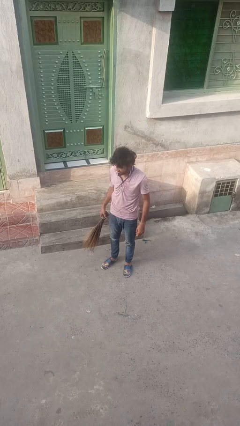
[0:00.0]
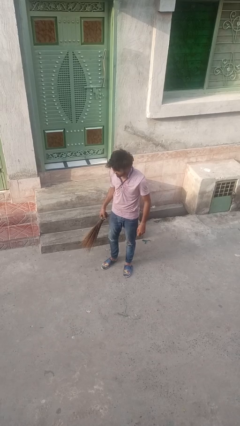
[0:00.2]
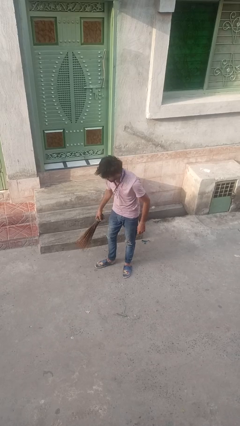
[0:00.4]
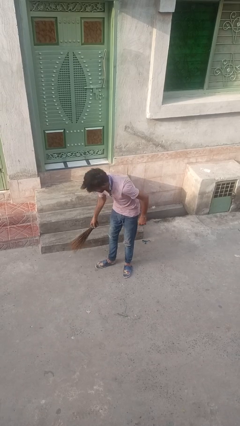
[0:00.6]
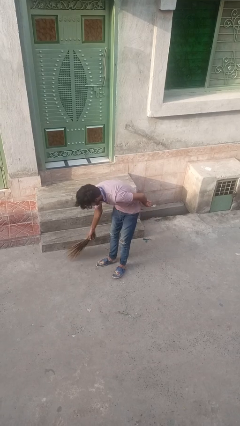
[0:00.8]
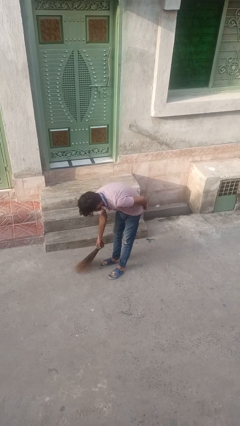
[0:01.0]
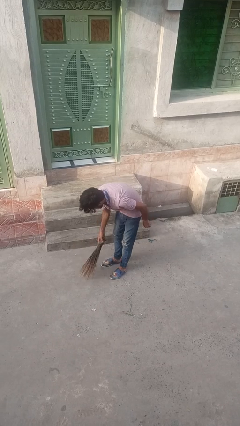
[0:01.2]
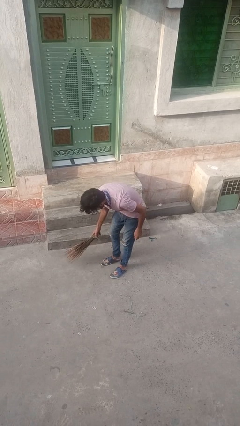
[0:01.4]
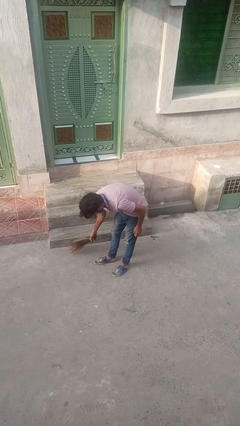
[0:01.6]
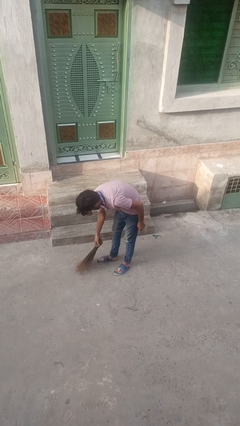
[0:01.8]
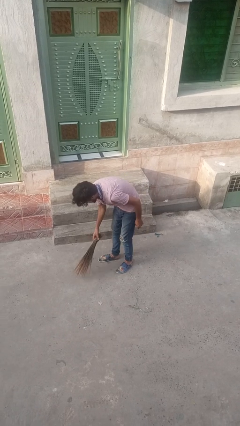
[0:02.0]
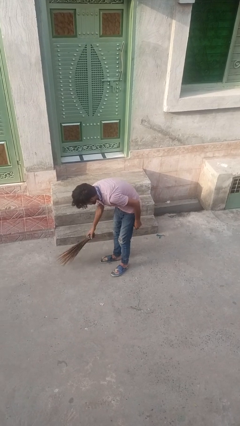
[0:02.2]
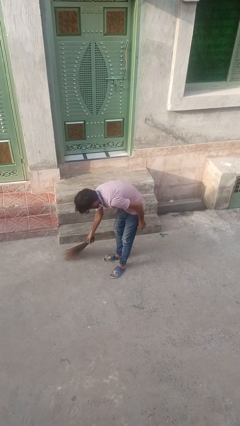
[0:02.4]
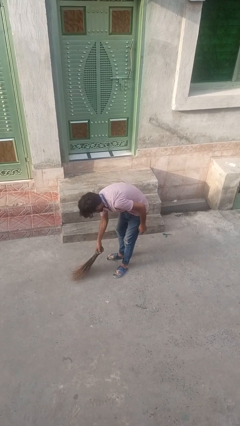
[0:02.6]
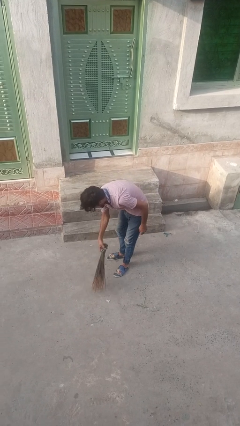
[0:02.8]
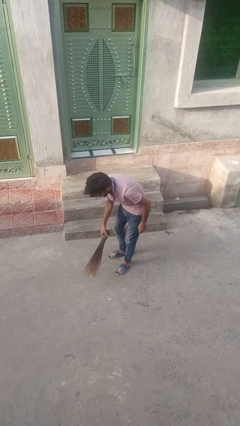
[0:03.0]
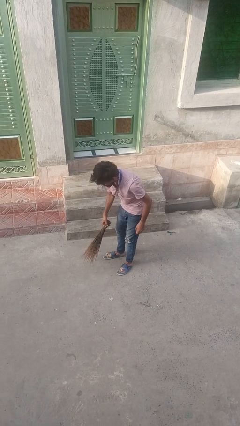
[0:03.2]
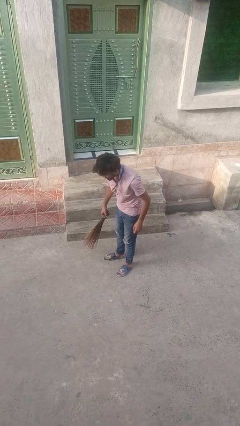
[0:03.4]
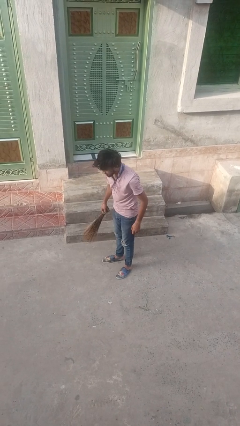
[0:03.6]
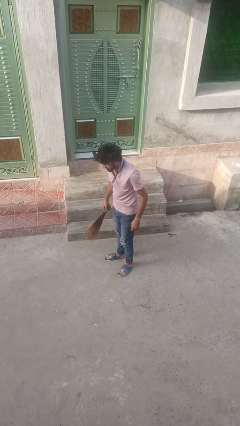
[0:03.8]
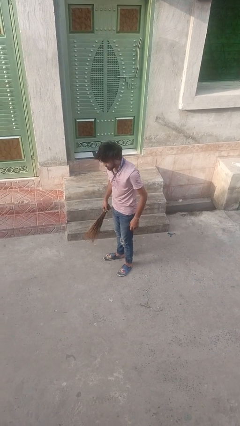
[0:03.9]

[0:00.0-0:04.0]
person sweeps floor

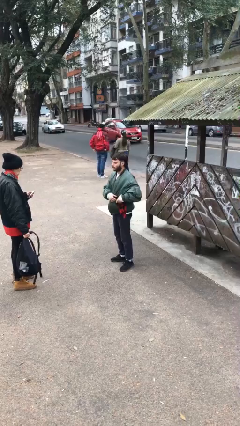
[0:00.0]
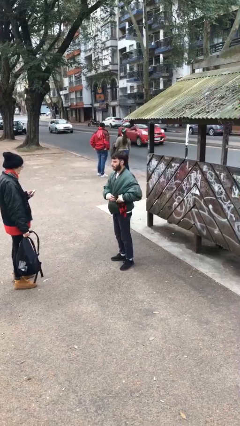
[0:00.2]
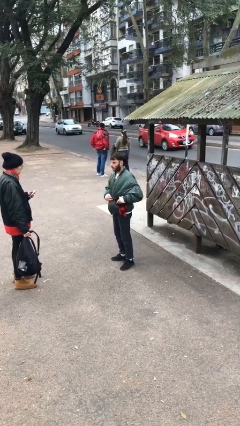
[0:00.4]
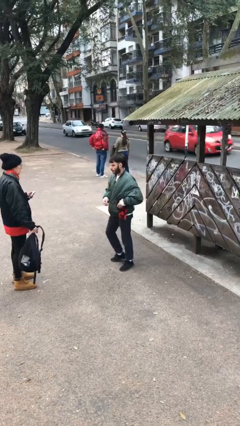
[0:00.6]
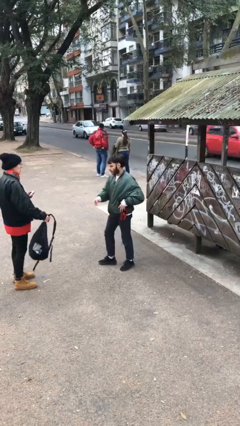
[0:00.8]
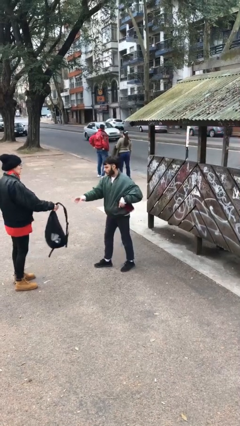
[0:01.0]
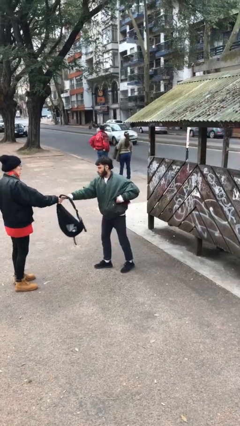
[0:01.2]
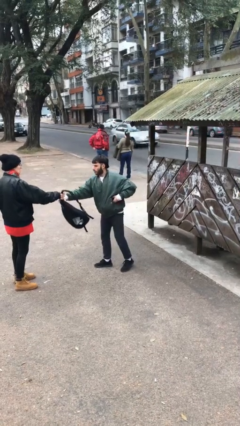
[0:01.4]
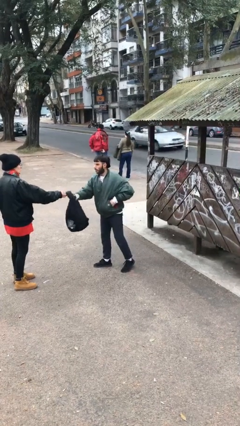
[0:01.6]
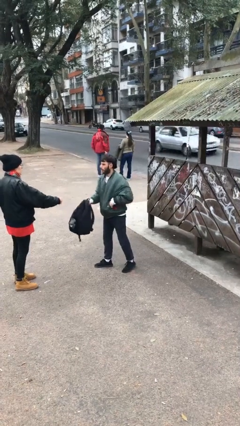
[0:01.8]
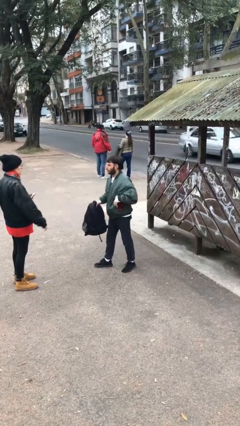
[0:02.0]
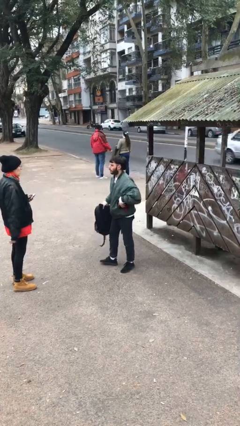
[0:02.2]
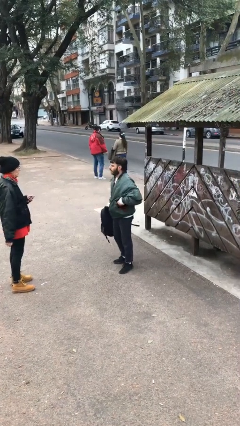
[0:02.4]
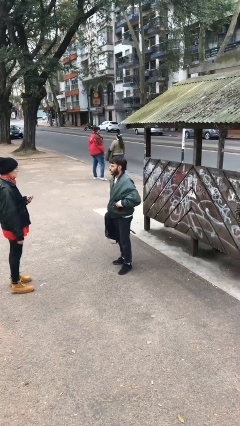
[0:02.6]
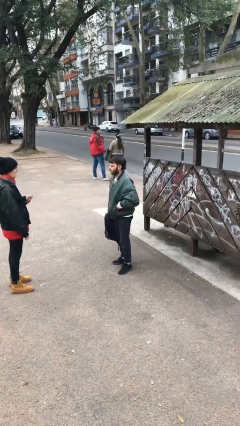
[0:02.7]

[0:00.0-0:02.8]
person transfers object to person

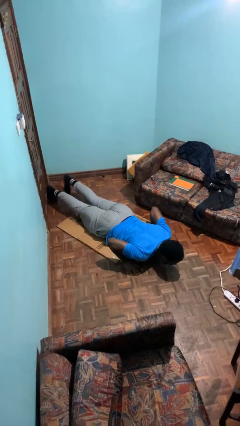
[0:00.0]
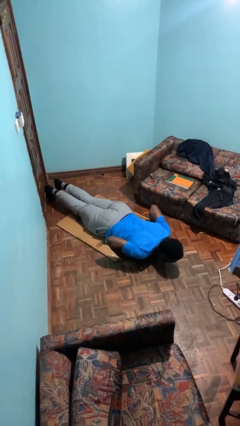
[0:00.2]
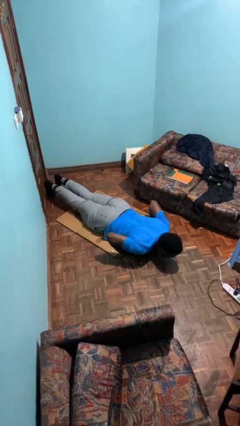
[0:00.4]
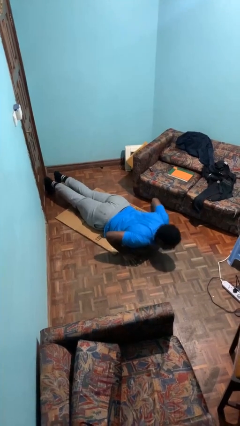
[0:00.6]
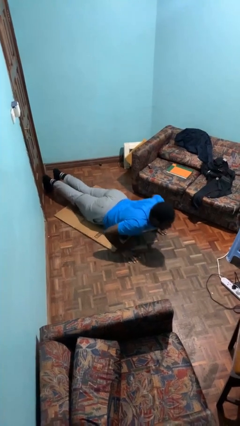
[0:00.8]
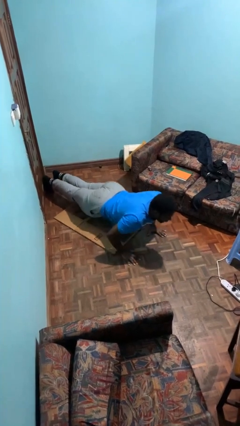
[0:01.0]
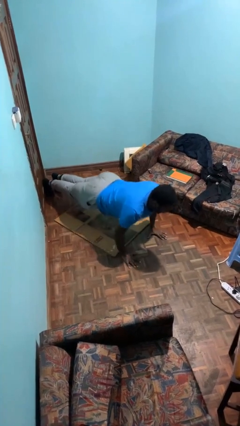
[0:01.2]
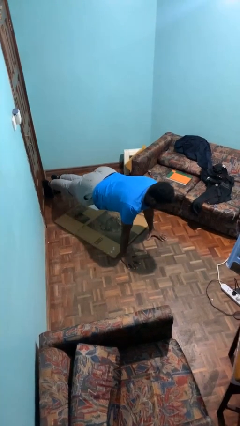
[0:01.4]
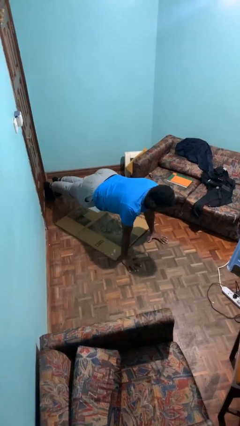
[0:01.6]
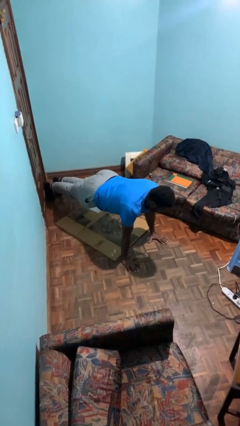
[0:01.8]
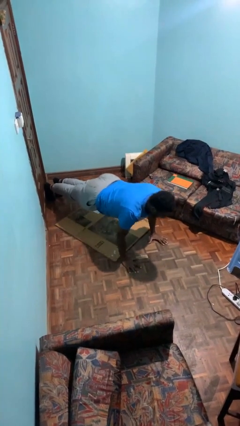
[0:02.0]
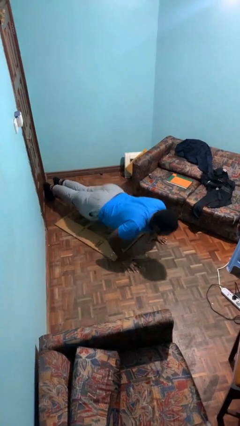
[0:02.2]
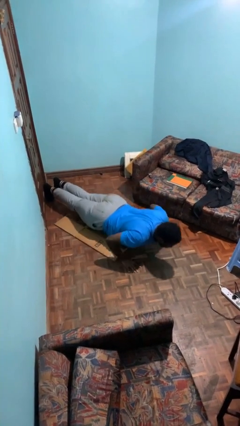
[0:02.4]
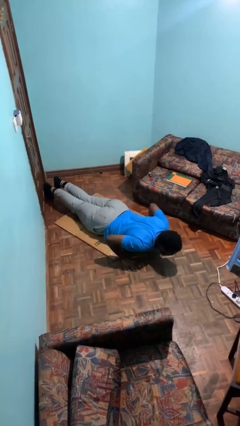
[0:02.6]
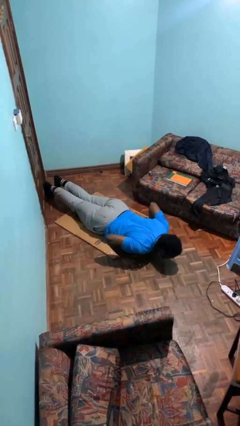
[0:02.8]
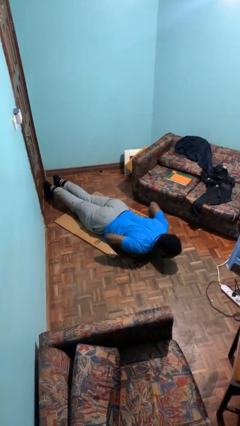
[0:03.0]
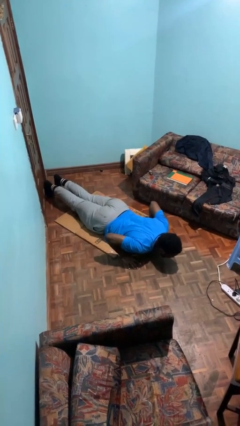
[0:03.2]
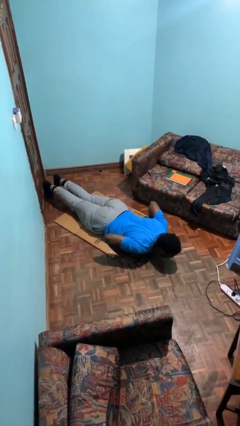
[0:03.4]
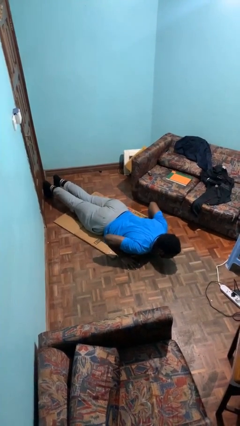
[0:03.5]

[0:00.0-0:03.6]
person exercises with pushup

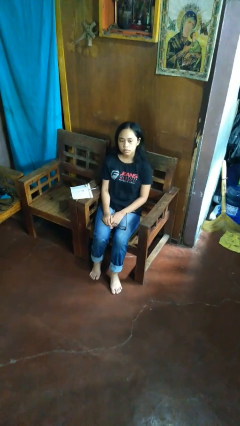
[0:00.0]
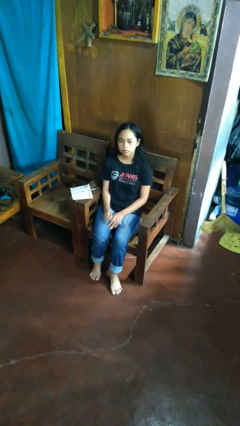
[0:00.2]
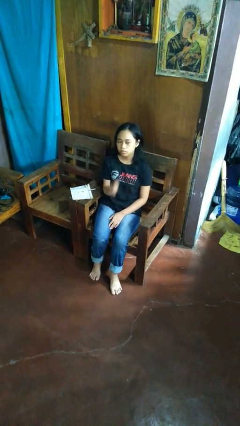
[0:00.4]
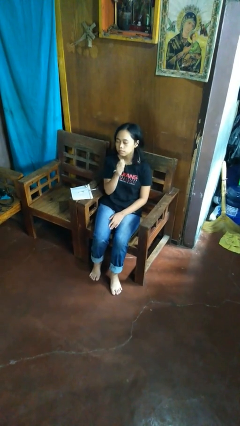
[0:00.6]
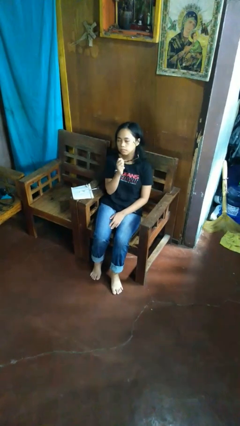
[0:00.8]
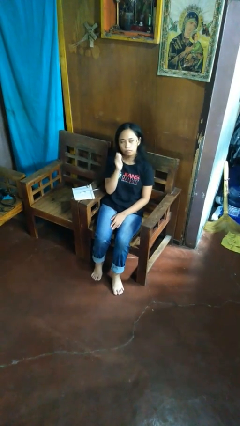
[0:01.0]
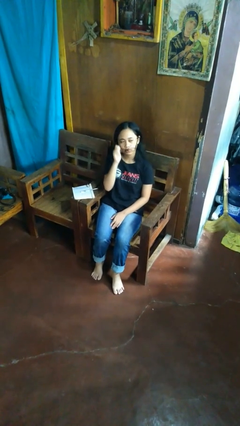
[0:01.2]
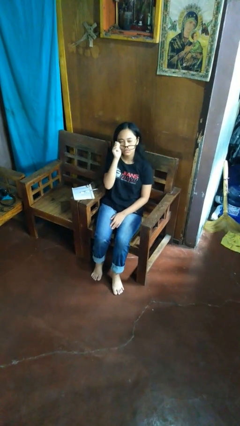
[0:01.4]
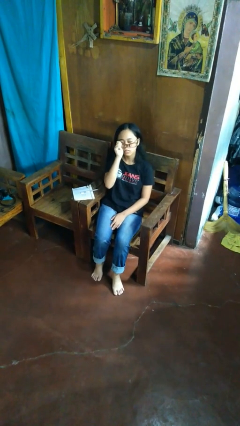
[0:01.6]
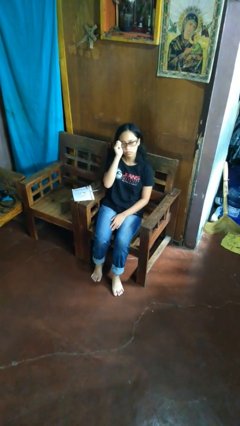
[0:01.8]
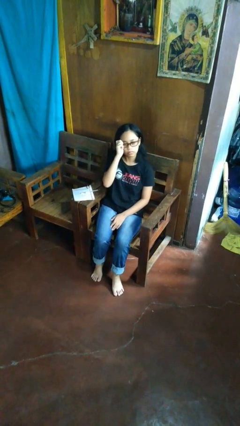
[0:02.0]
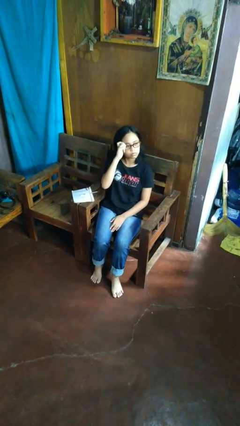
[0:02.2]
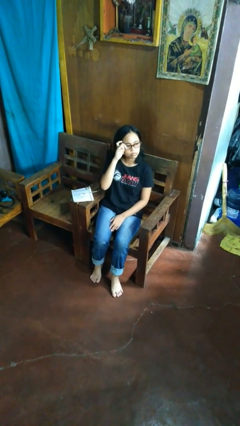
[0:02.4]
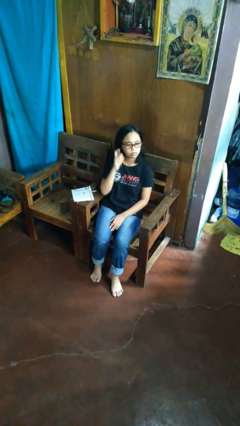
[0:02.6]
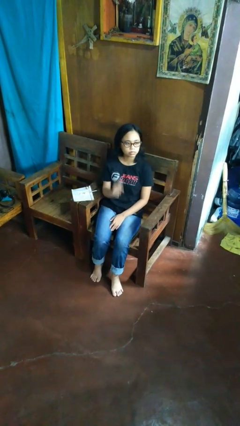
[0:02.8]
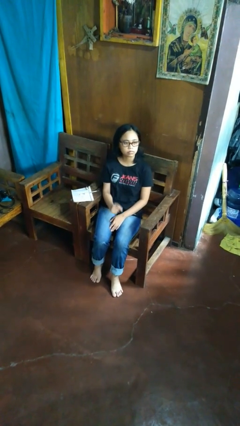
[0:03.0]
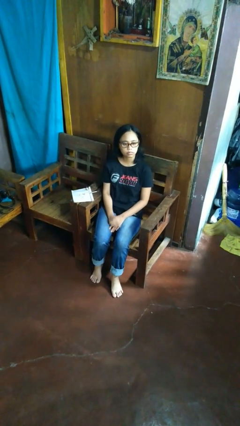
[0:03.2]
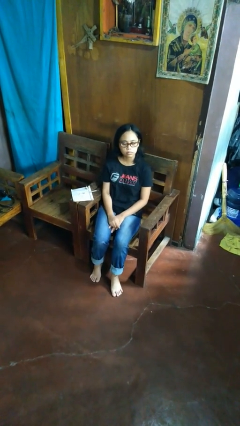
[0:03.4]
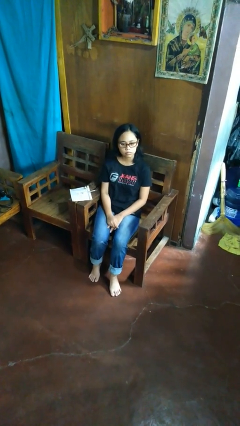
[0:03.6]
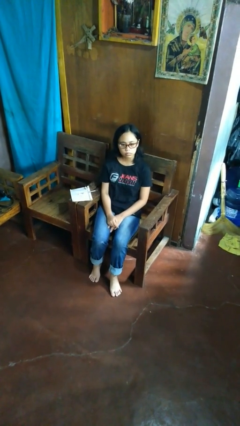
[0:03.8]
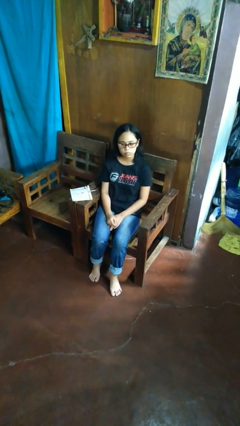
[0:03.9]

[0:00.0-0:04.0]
person puts on glasses

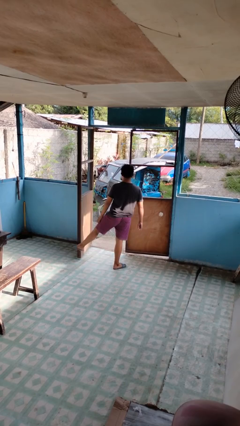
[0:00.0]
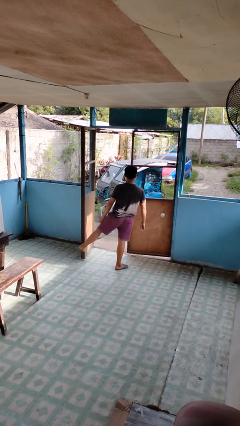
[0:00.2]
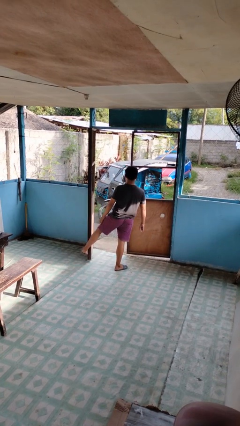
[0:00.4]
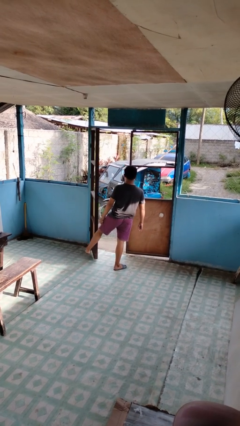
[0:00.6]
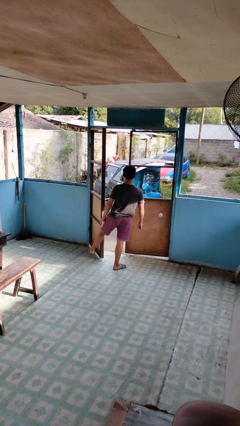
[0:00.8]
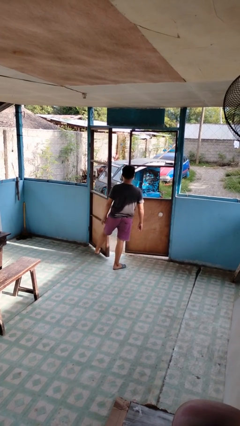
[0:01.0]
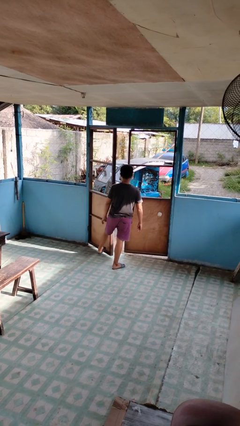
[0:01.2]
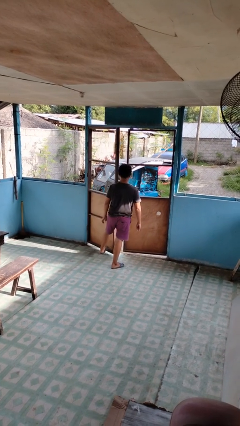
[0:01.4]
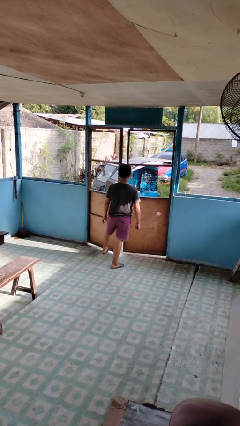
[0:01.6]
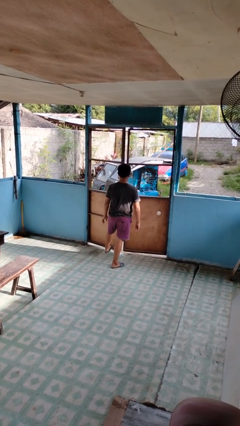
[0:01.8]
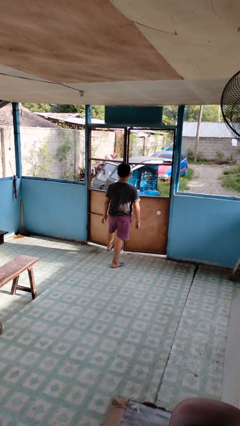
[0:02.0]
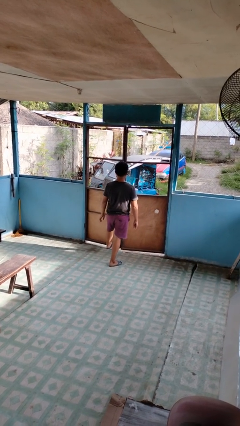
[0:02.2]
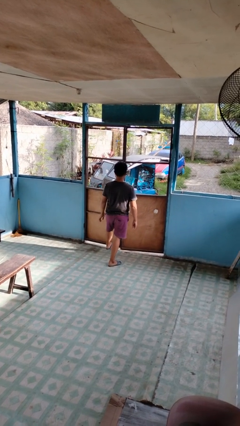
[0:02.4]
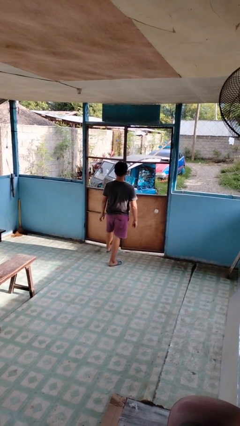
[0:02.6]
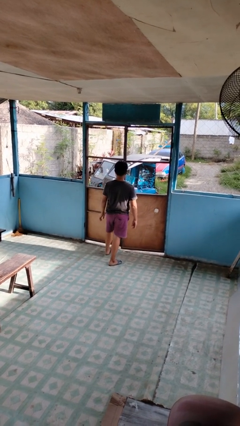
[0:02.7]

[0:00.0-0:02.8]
person closes door with foot

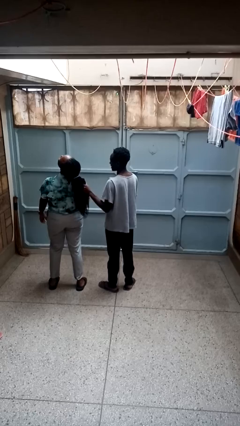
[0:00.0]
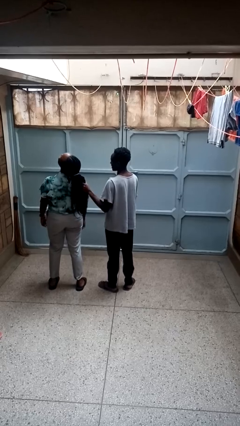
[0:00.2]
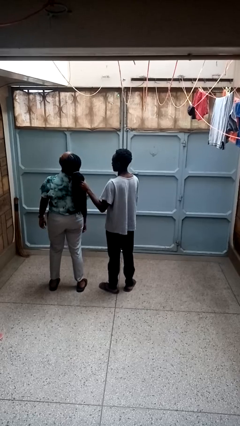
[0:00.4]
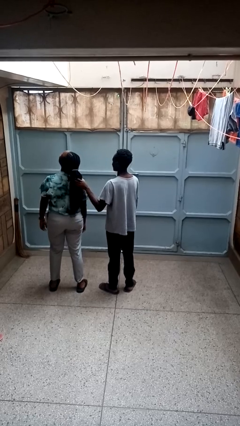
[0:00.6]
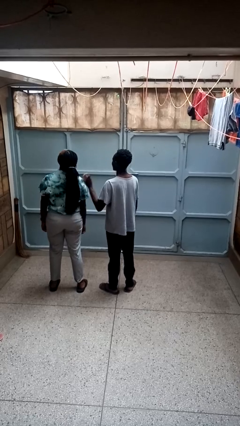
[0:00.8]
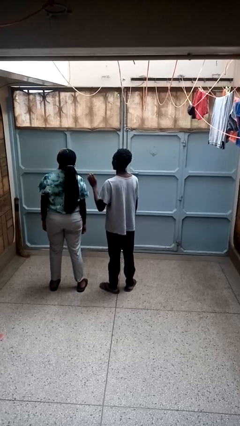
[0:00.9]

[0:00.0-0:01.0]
person grabs person by hair
